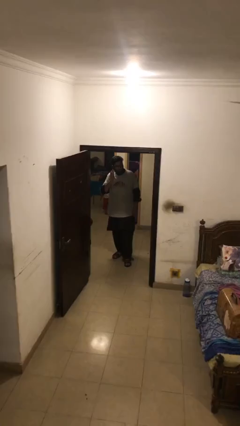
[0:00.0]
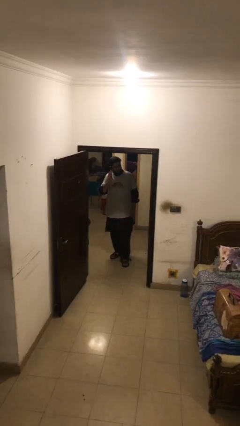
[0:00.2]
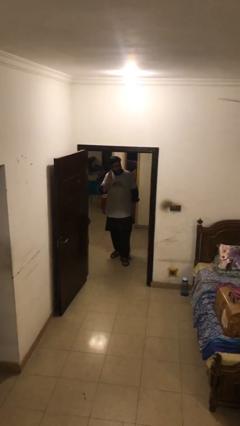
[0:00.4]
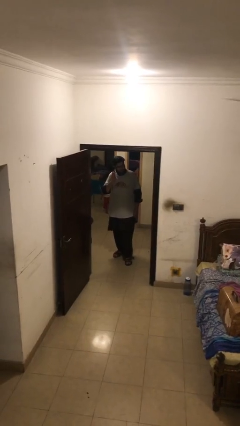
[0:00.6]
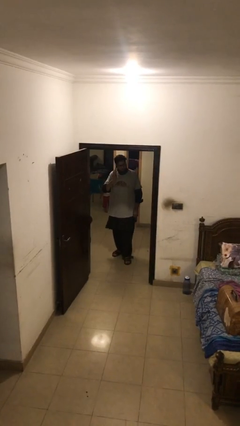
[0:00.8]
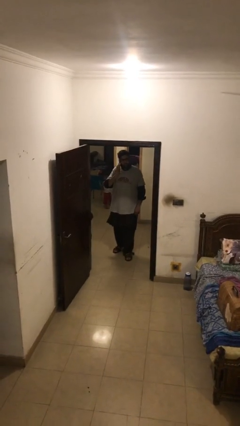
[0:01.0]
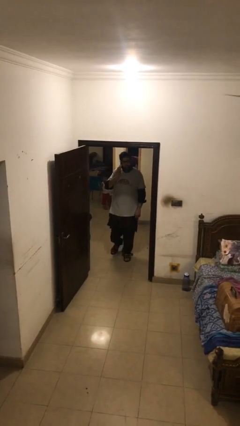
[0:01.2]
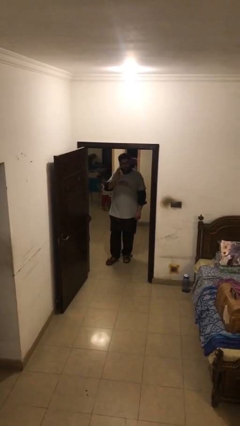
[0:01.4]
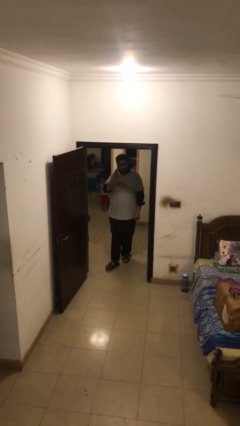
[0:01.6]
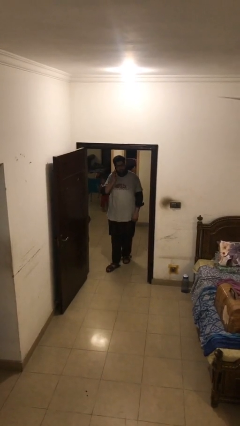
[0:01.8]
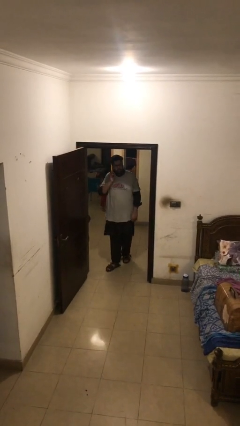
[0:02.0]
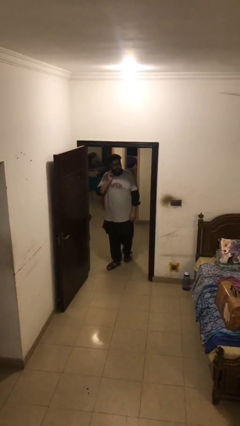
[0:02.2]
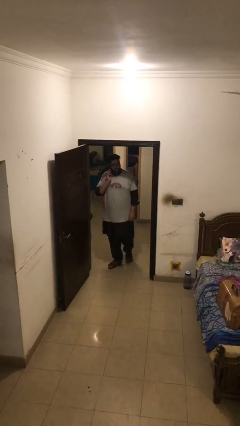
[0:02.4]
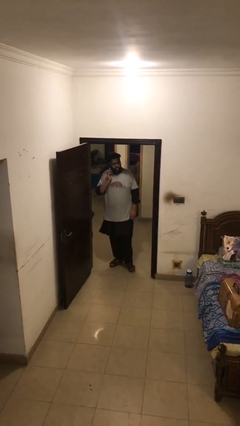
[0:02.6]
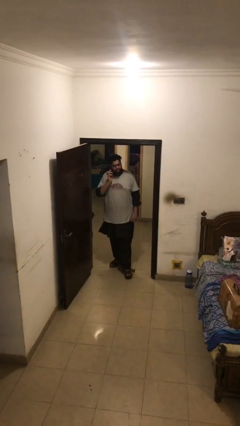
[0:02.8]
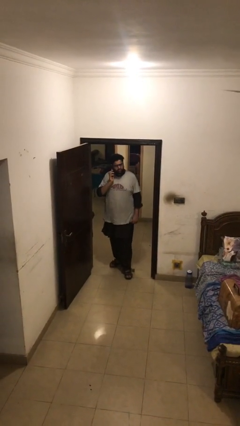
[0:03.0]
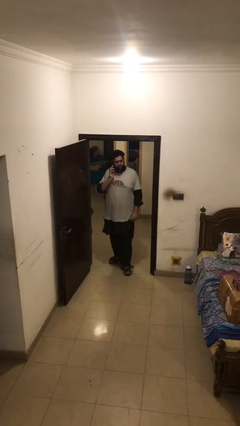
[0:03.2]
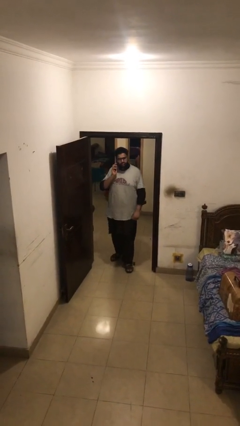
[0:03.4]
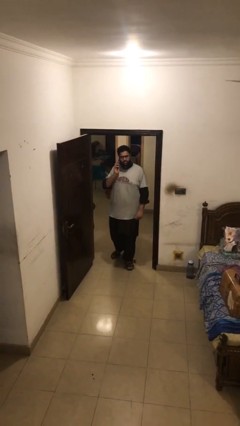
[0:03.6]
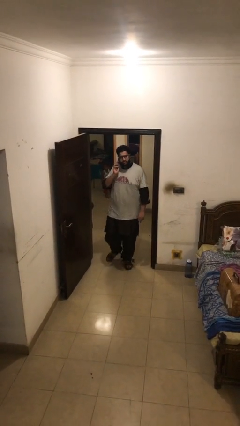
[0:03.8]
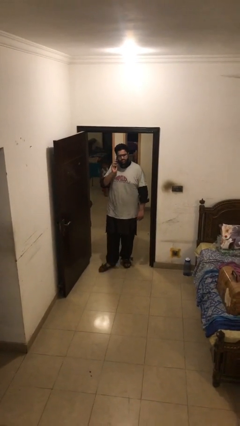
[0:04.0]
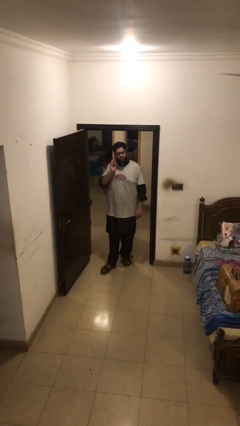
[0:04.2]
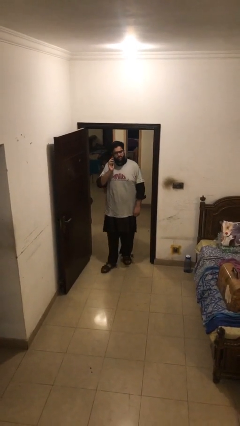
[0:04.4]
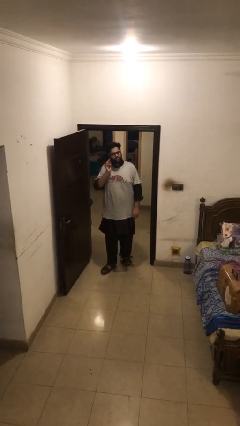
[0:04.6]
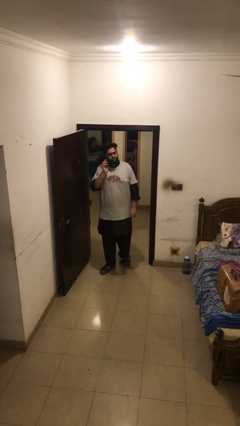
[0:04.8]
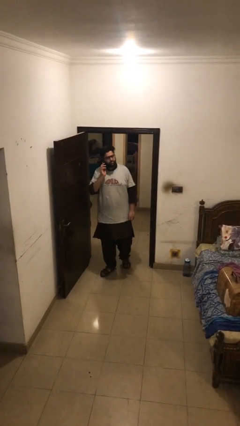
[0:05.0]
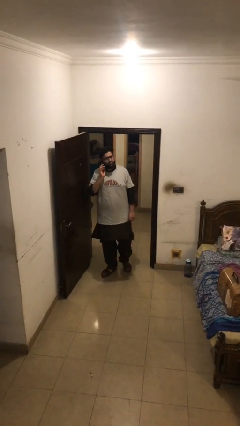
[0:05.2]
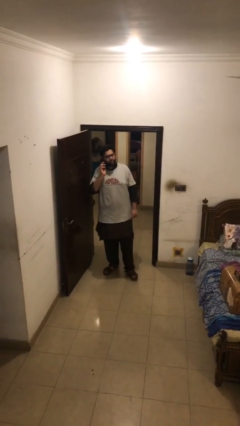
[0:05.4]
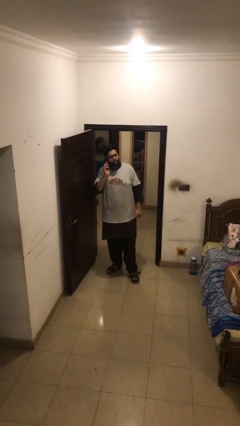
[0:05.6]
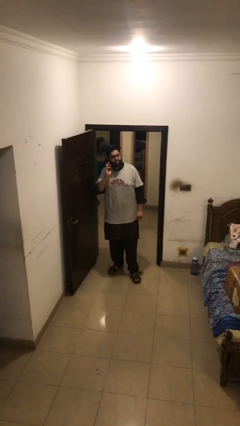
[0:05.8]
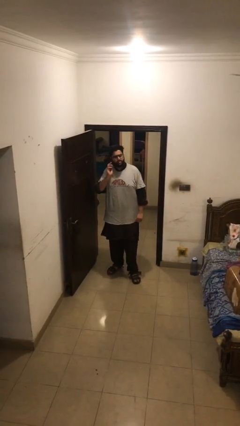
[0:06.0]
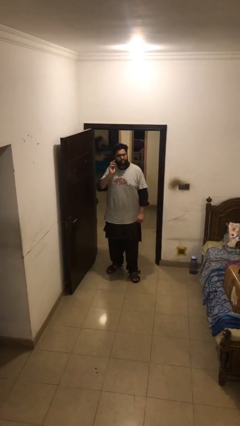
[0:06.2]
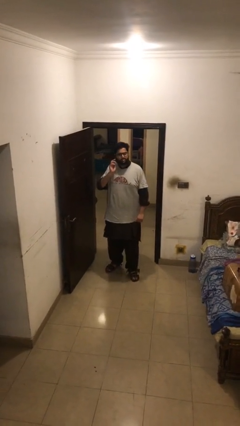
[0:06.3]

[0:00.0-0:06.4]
person enters scene through structure

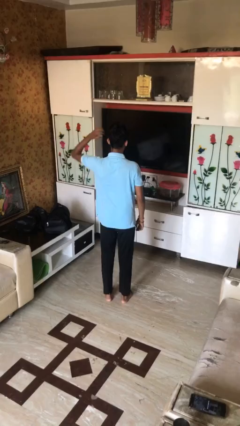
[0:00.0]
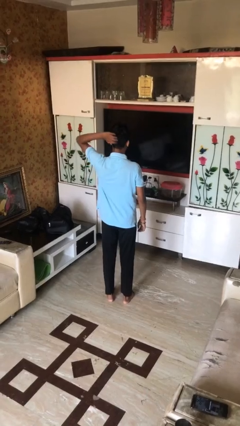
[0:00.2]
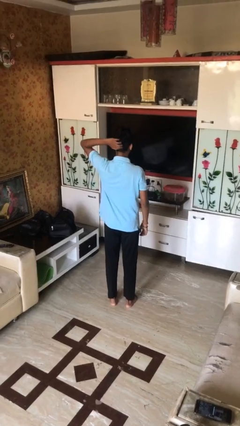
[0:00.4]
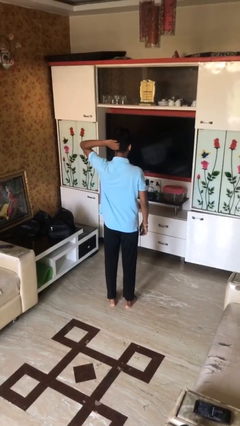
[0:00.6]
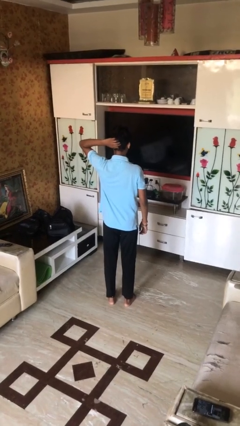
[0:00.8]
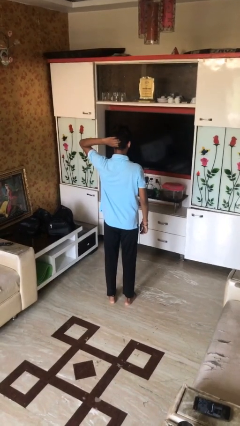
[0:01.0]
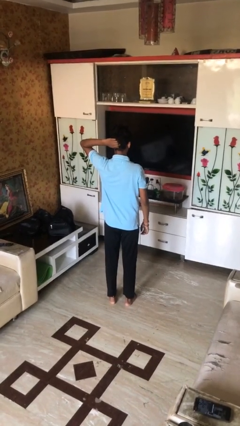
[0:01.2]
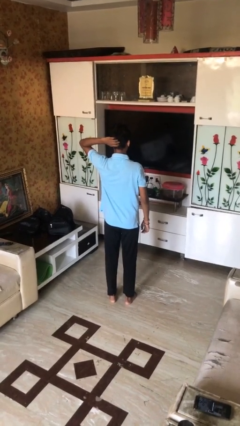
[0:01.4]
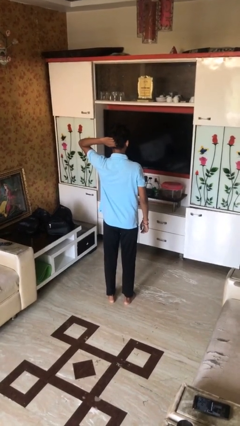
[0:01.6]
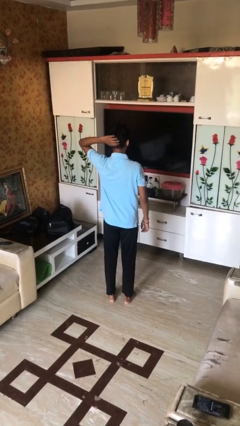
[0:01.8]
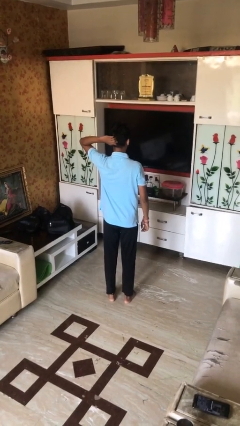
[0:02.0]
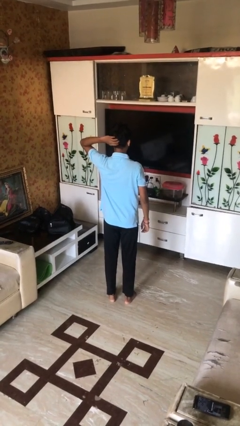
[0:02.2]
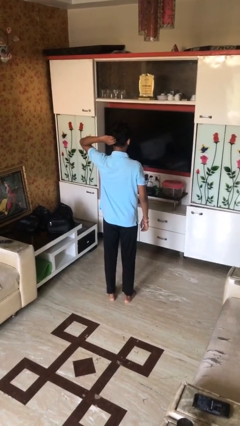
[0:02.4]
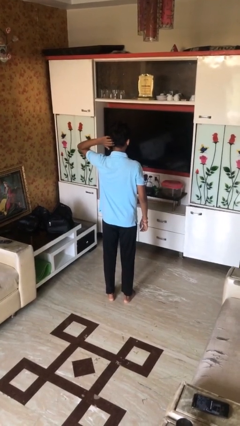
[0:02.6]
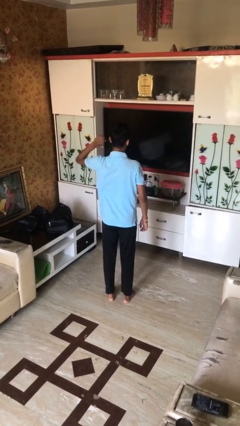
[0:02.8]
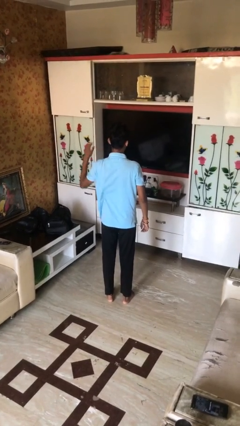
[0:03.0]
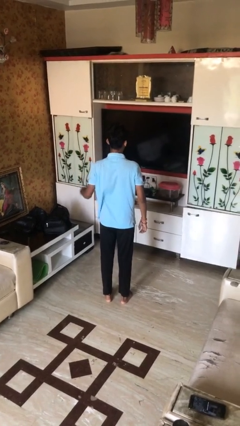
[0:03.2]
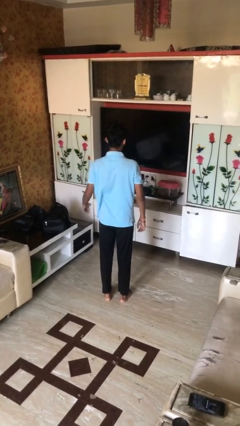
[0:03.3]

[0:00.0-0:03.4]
person scratches face

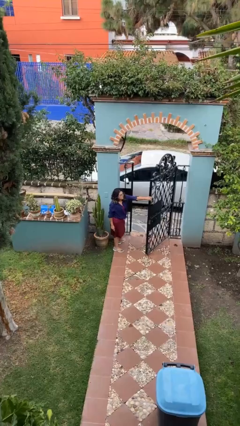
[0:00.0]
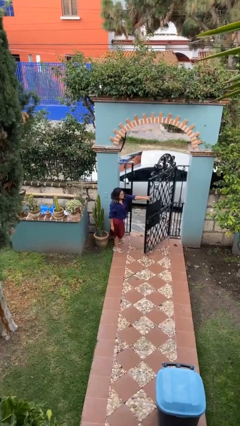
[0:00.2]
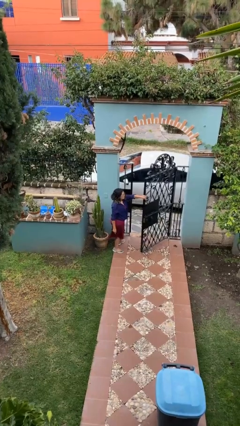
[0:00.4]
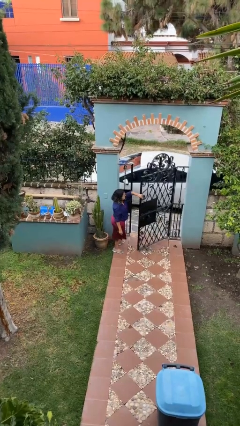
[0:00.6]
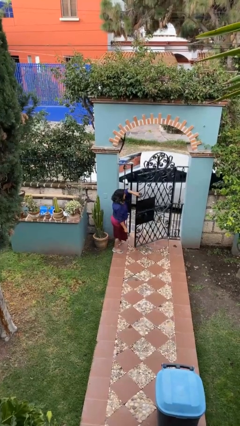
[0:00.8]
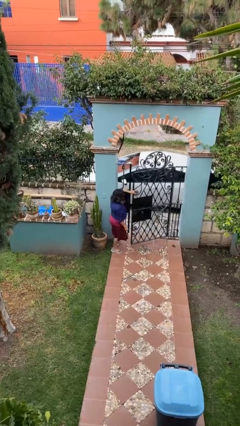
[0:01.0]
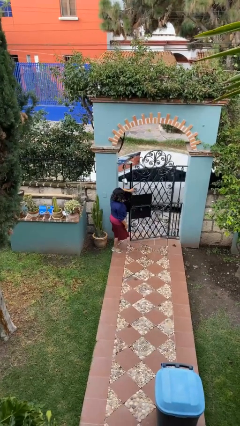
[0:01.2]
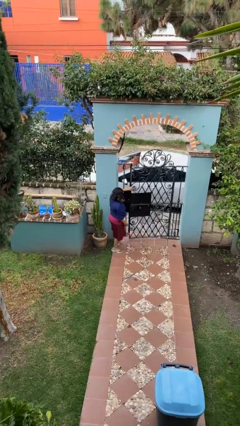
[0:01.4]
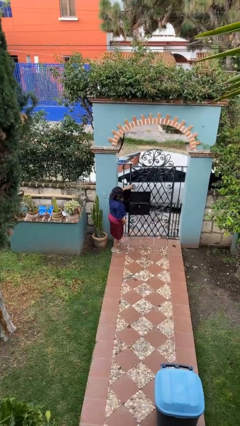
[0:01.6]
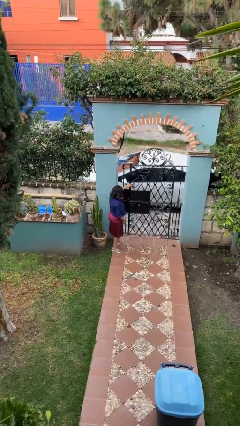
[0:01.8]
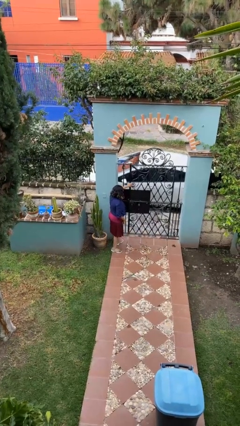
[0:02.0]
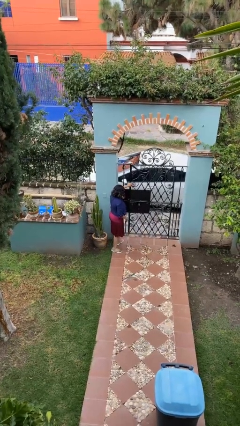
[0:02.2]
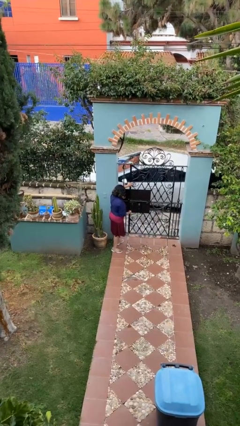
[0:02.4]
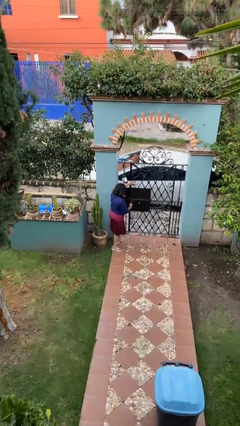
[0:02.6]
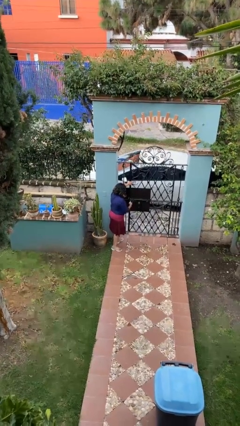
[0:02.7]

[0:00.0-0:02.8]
person closes facility door

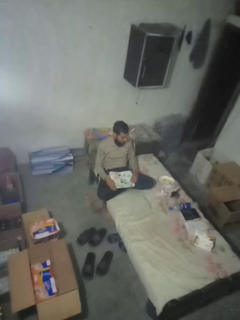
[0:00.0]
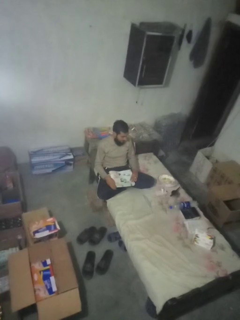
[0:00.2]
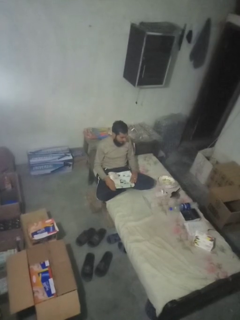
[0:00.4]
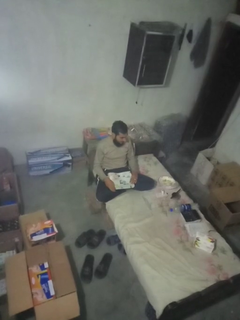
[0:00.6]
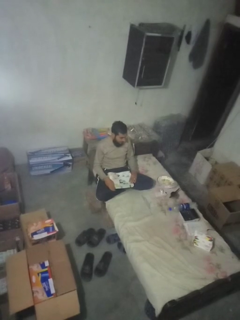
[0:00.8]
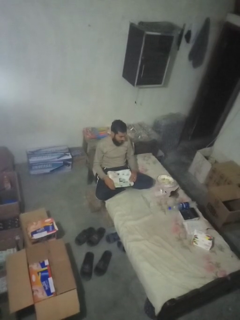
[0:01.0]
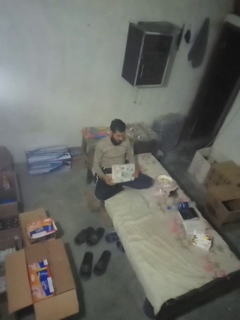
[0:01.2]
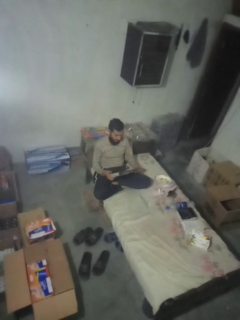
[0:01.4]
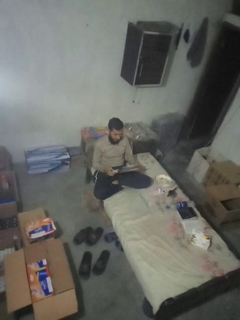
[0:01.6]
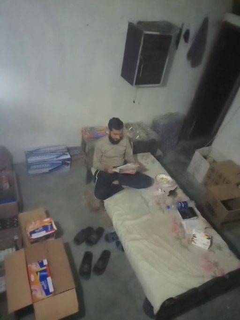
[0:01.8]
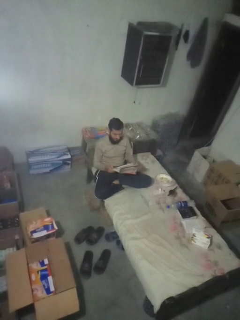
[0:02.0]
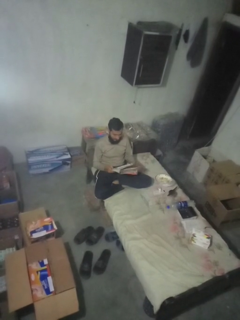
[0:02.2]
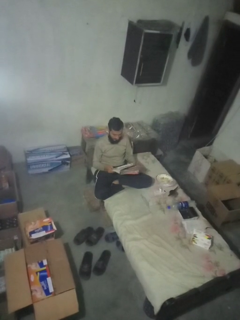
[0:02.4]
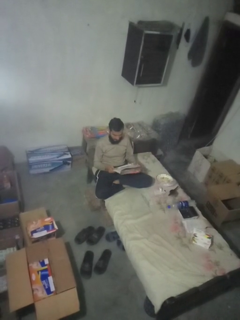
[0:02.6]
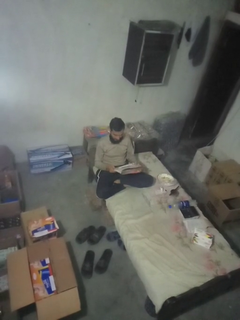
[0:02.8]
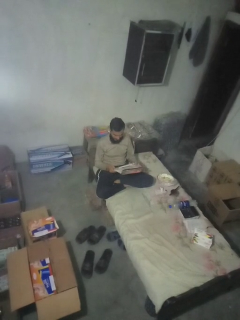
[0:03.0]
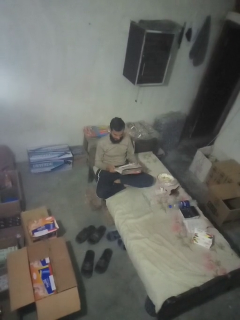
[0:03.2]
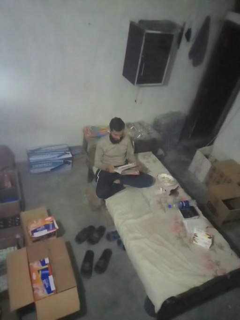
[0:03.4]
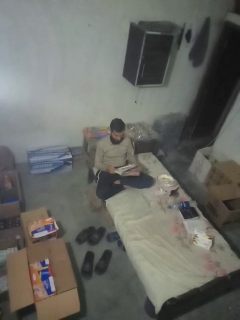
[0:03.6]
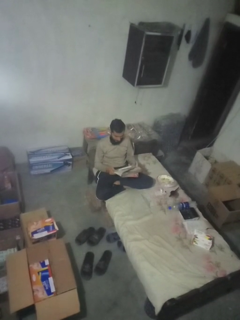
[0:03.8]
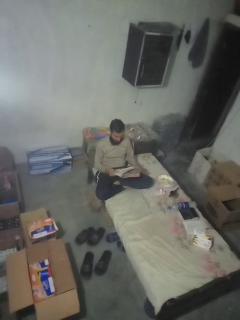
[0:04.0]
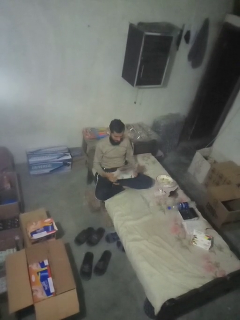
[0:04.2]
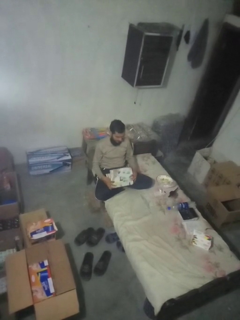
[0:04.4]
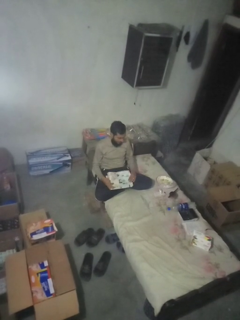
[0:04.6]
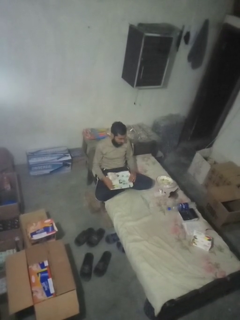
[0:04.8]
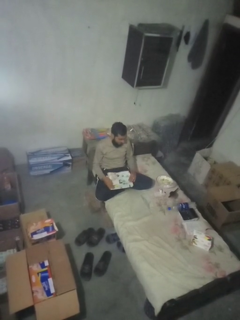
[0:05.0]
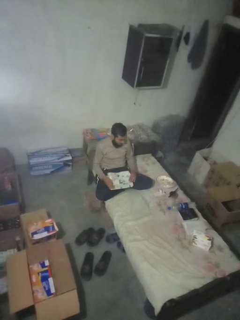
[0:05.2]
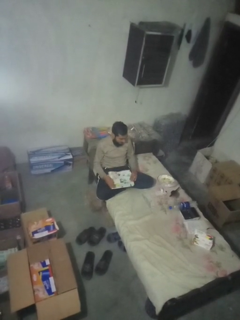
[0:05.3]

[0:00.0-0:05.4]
person reads magazine

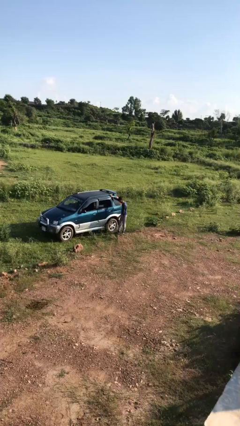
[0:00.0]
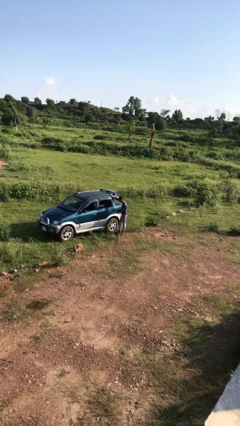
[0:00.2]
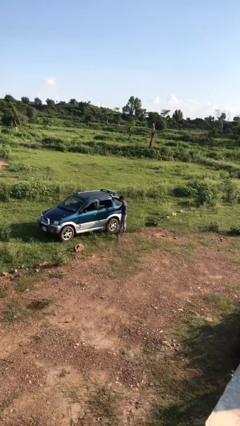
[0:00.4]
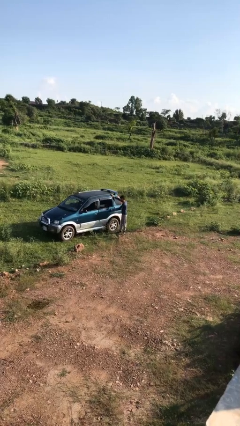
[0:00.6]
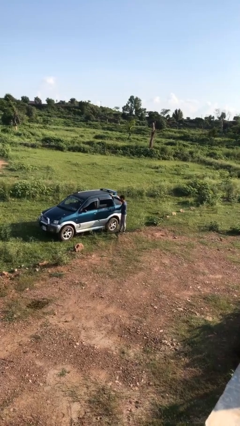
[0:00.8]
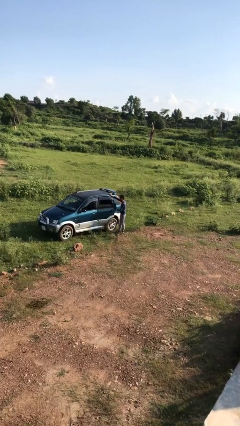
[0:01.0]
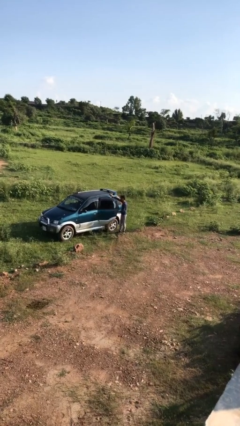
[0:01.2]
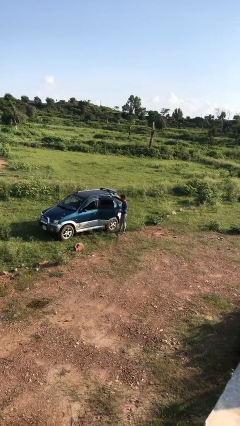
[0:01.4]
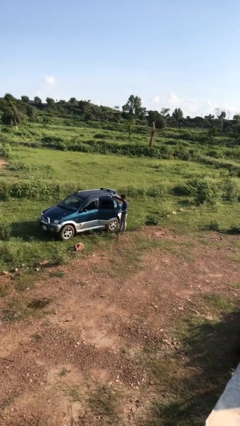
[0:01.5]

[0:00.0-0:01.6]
person opens car door
